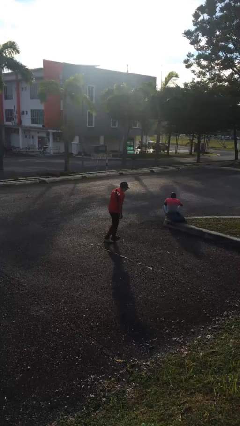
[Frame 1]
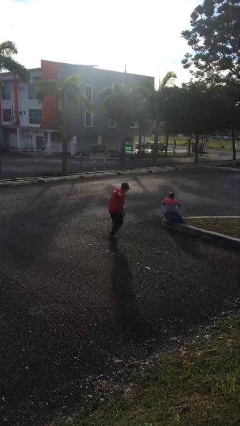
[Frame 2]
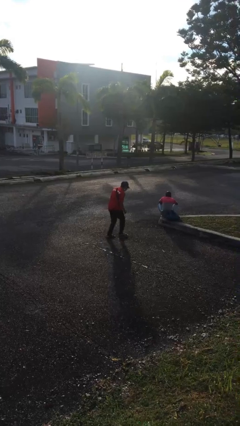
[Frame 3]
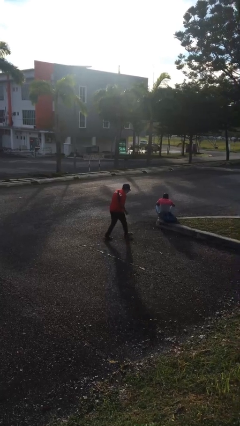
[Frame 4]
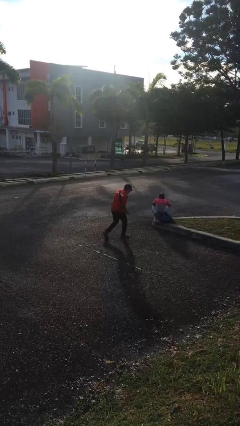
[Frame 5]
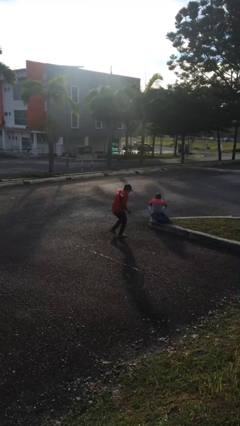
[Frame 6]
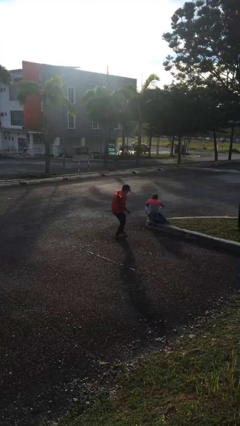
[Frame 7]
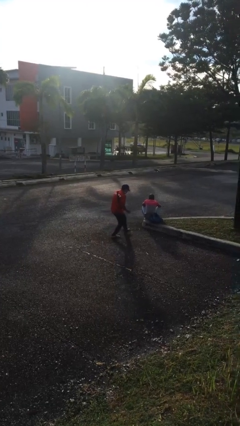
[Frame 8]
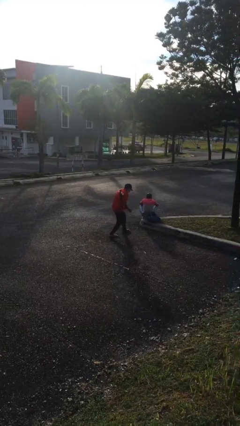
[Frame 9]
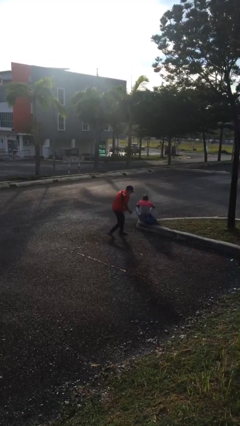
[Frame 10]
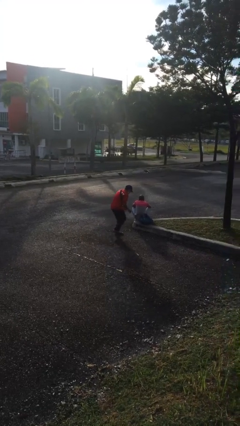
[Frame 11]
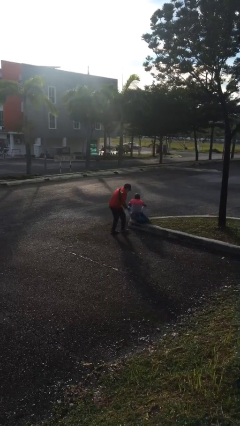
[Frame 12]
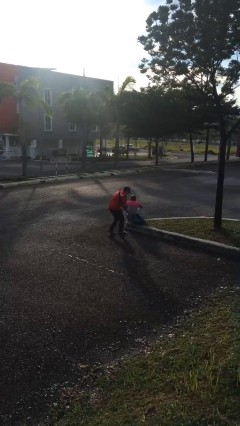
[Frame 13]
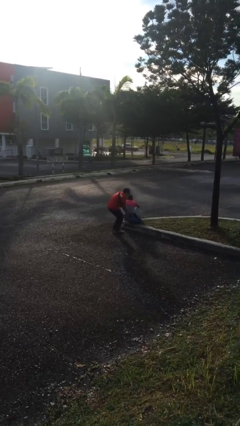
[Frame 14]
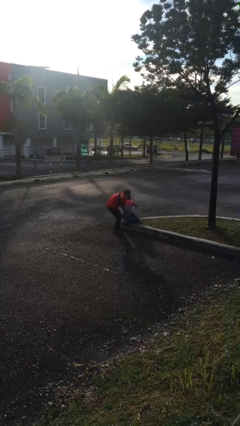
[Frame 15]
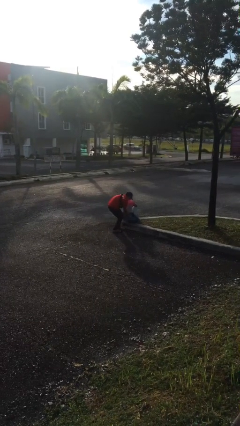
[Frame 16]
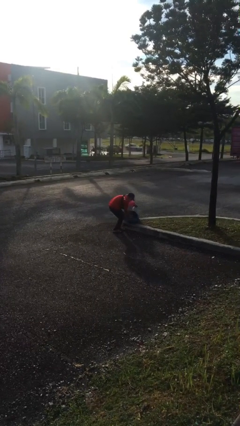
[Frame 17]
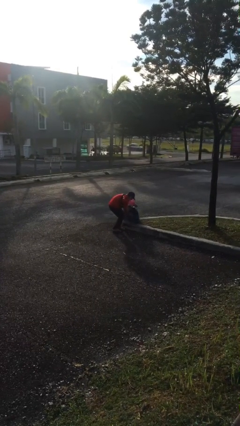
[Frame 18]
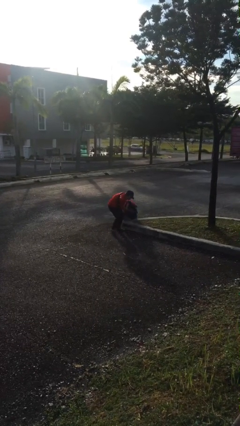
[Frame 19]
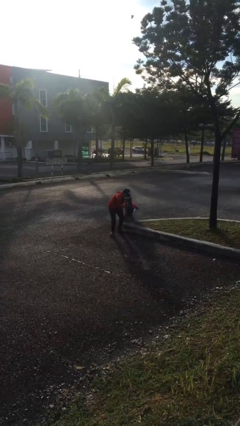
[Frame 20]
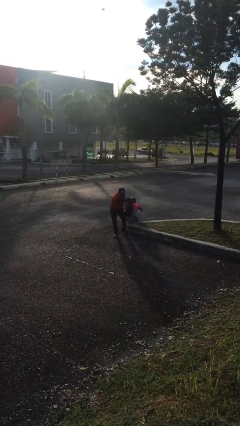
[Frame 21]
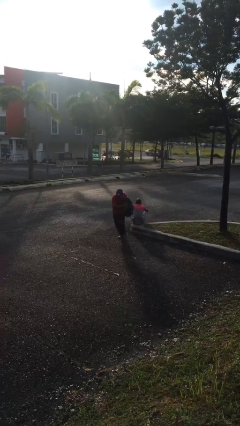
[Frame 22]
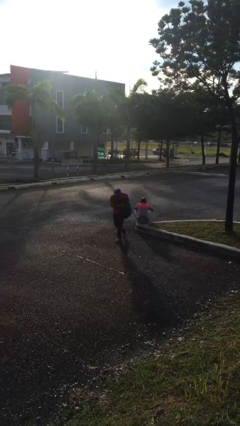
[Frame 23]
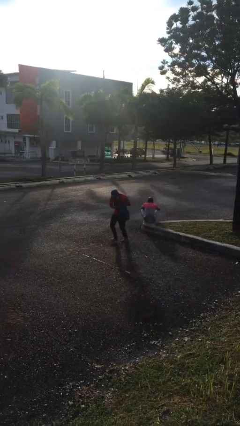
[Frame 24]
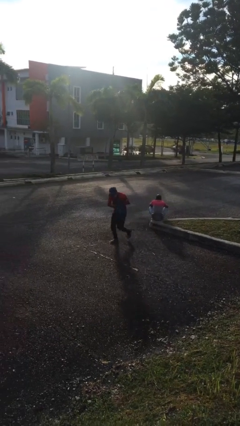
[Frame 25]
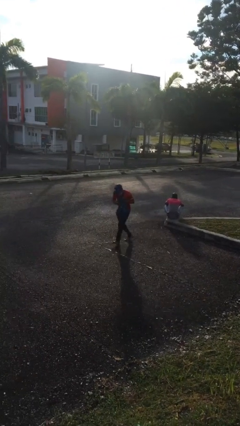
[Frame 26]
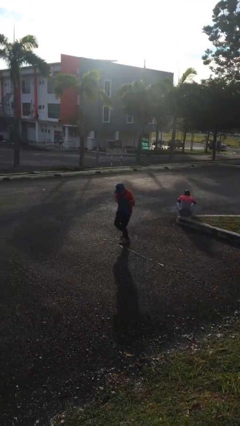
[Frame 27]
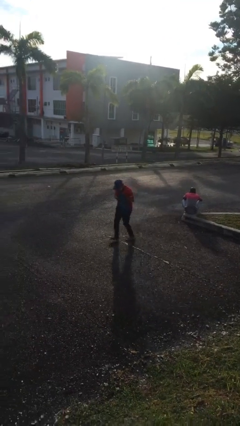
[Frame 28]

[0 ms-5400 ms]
person steals object from person

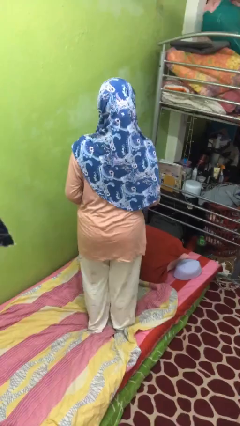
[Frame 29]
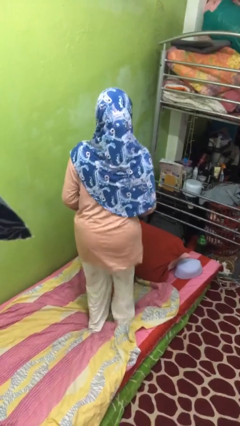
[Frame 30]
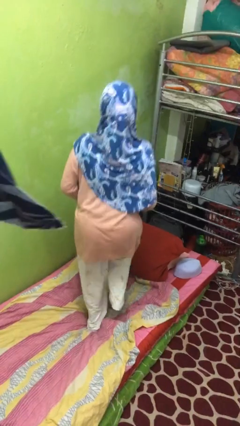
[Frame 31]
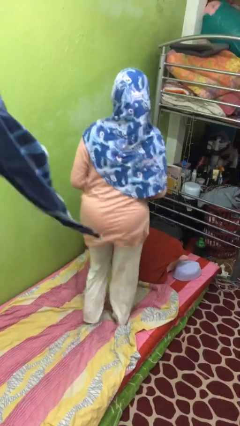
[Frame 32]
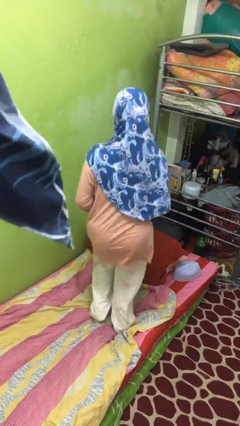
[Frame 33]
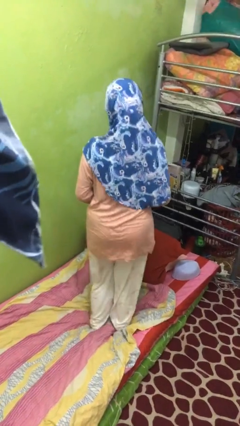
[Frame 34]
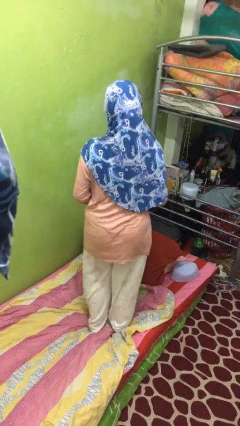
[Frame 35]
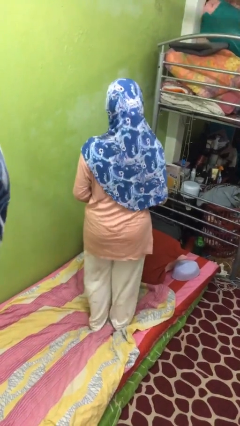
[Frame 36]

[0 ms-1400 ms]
person jumps on bed

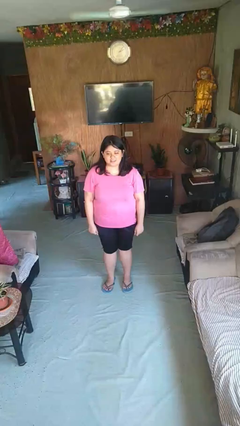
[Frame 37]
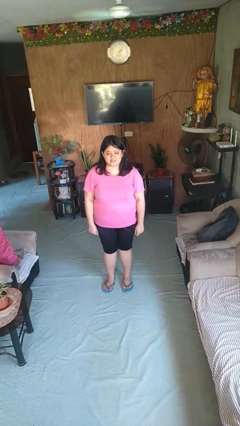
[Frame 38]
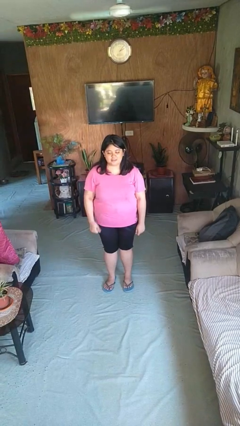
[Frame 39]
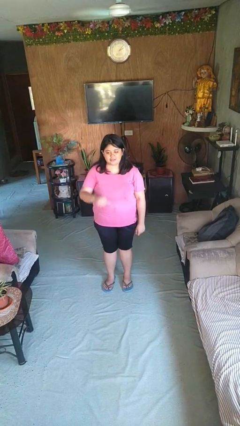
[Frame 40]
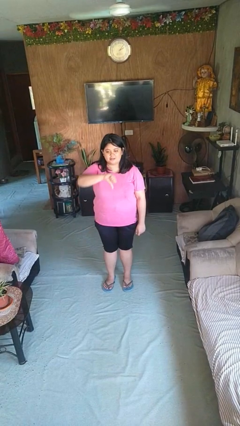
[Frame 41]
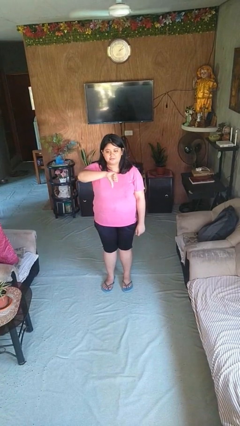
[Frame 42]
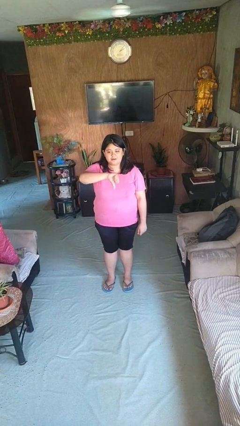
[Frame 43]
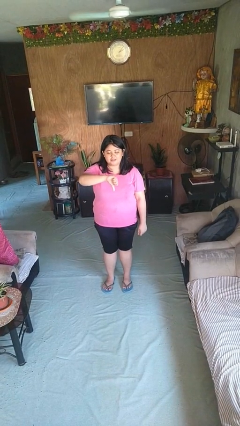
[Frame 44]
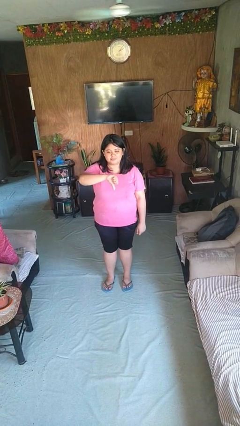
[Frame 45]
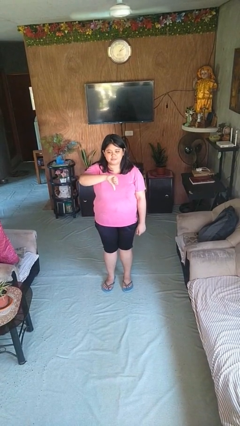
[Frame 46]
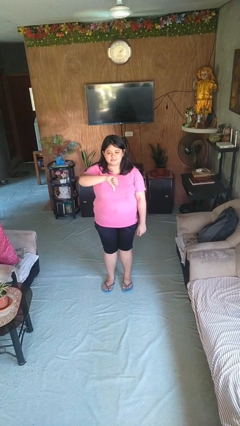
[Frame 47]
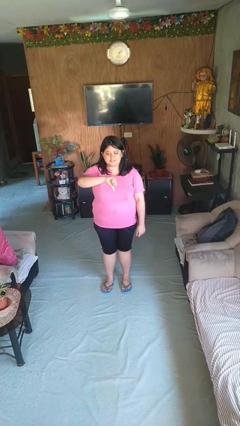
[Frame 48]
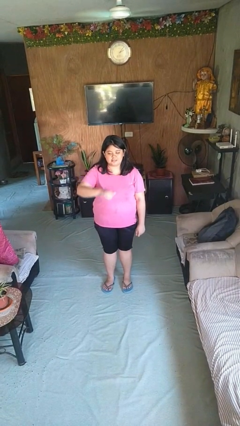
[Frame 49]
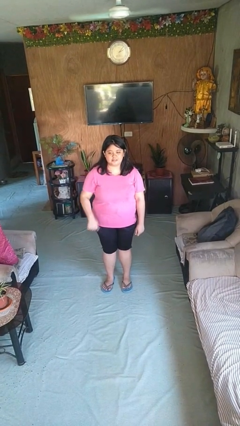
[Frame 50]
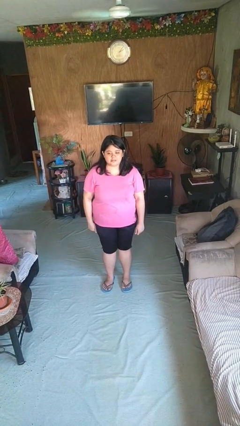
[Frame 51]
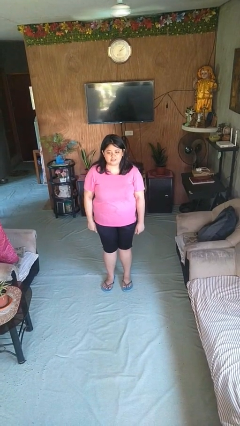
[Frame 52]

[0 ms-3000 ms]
person gestures thumbs down

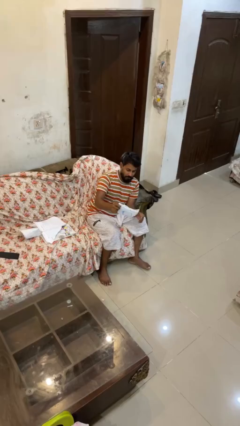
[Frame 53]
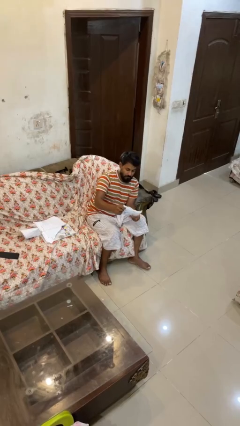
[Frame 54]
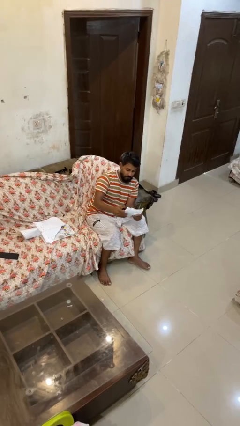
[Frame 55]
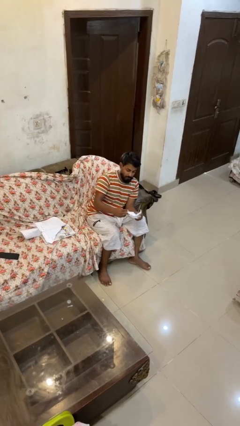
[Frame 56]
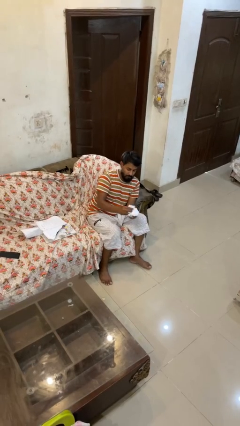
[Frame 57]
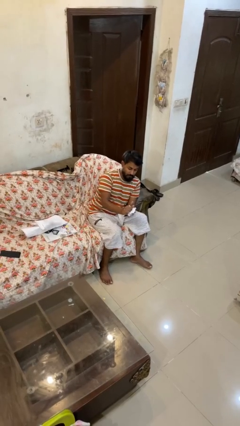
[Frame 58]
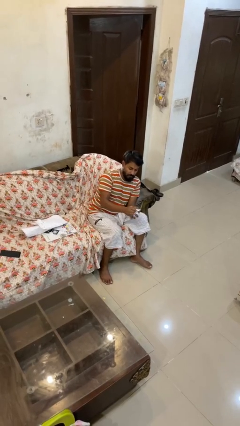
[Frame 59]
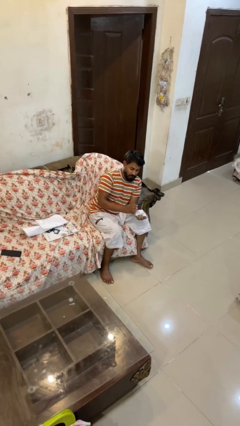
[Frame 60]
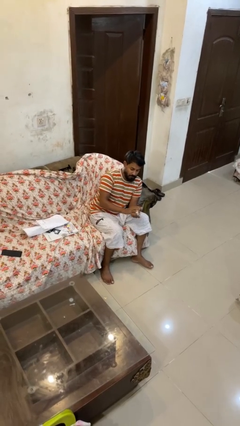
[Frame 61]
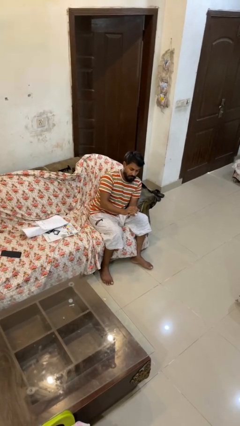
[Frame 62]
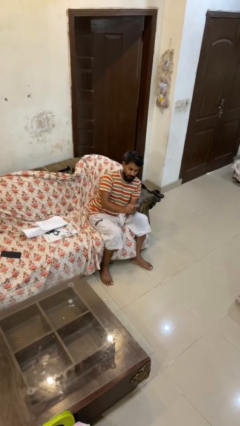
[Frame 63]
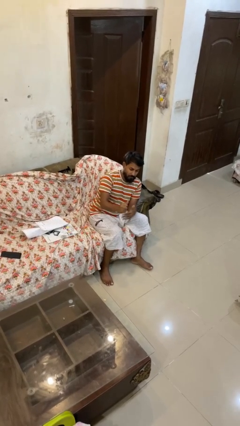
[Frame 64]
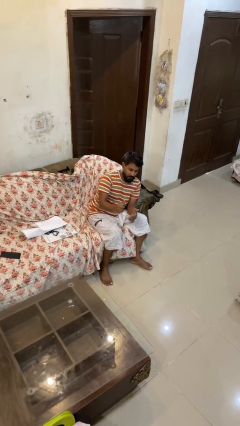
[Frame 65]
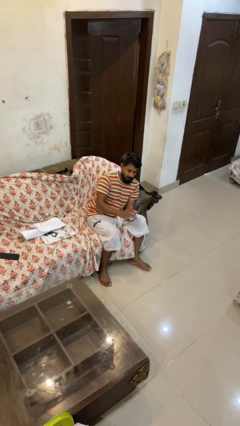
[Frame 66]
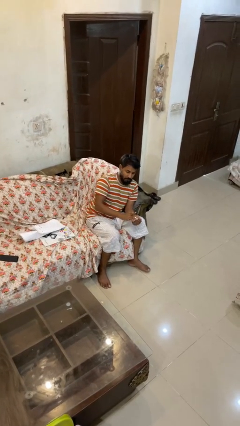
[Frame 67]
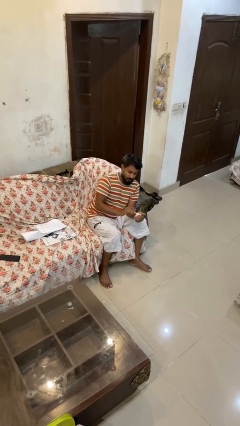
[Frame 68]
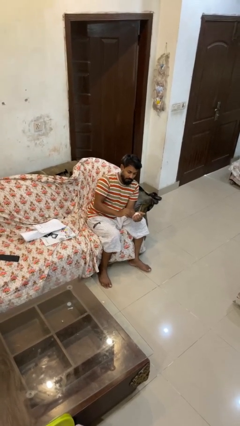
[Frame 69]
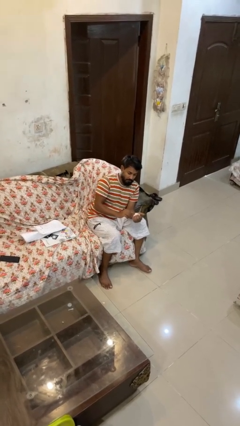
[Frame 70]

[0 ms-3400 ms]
person crumples paper

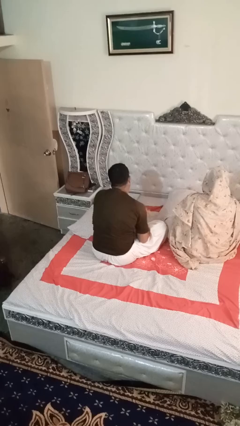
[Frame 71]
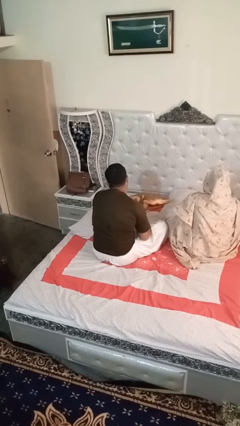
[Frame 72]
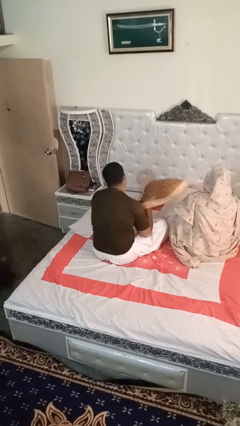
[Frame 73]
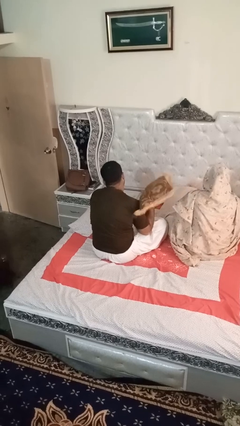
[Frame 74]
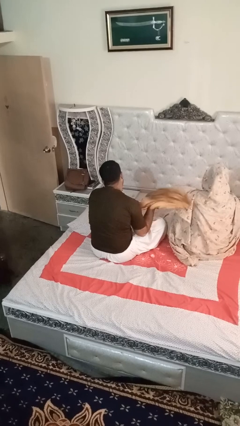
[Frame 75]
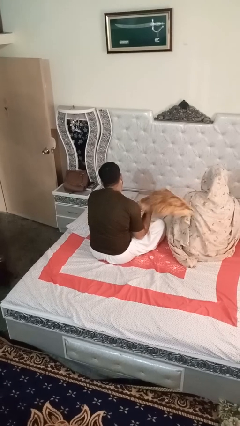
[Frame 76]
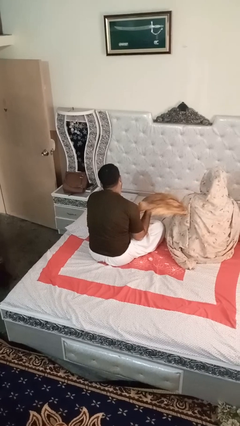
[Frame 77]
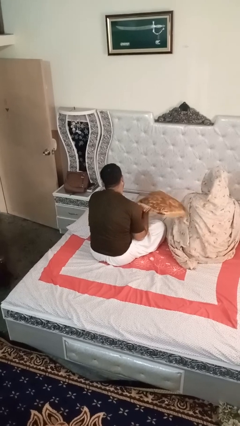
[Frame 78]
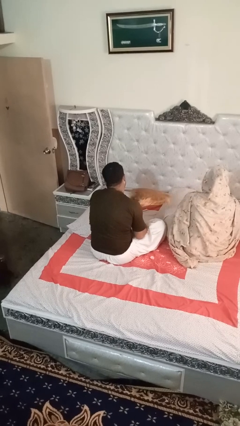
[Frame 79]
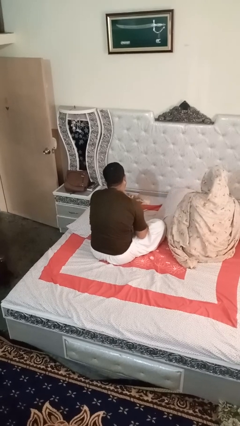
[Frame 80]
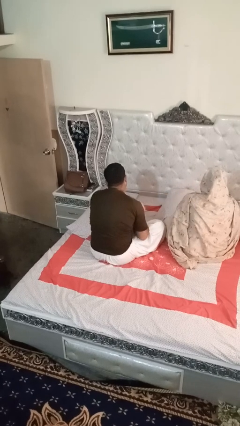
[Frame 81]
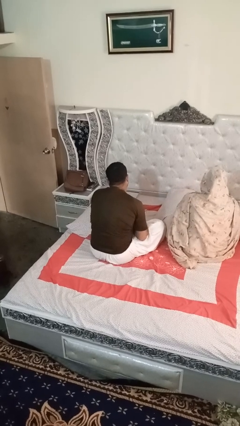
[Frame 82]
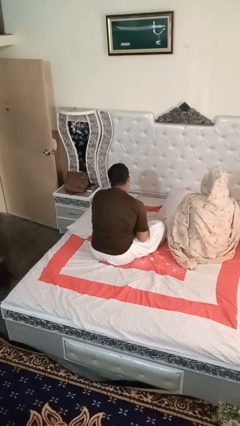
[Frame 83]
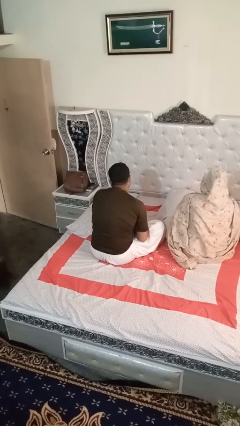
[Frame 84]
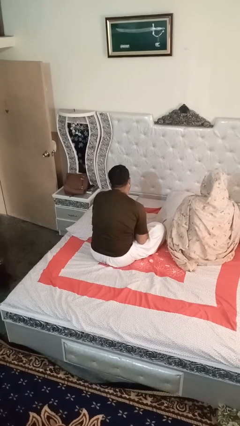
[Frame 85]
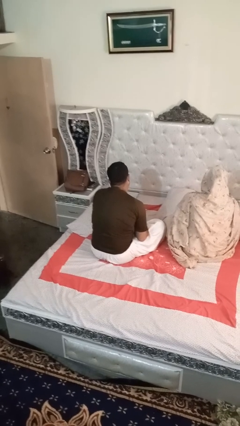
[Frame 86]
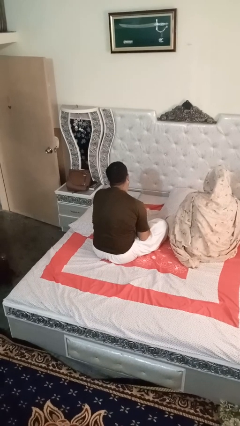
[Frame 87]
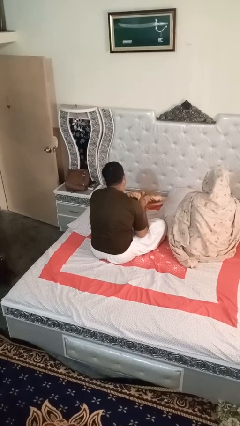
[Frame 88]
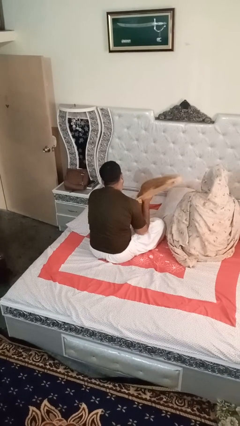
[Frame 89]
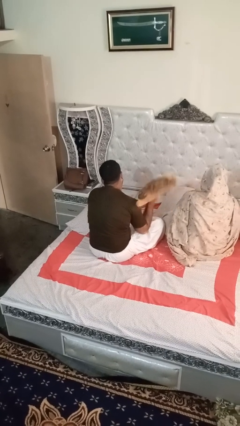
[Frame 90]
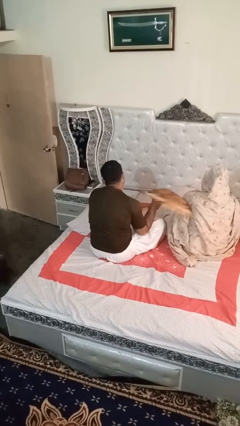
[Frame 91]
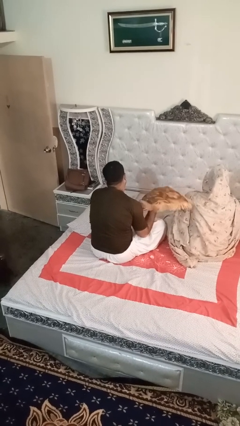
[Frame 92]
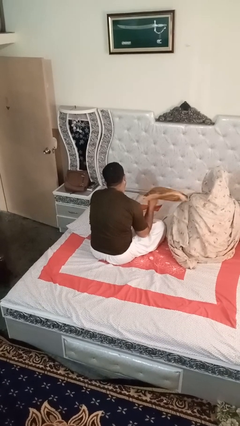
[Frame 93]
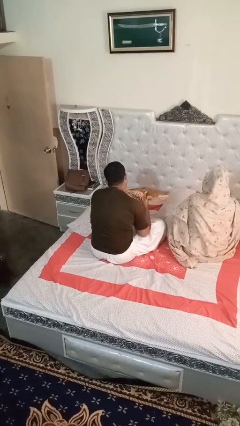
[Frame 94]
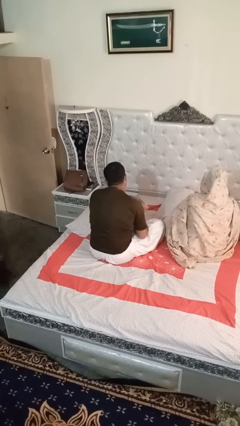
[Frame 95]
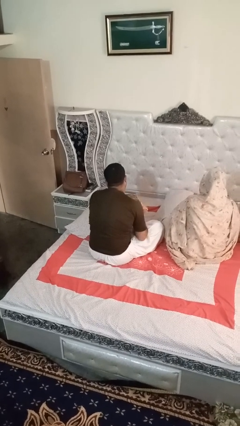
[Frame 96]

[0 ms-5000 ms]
person hits person with pillow
